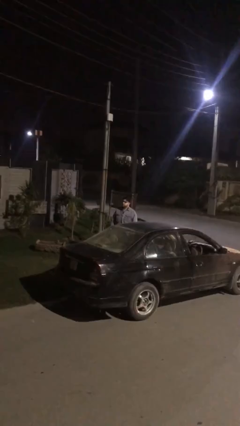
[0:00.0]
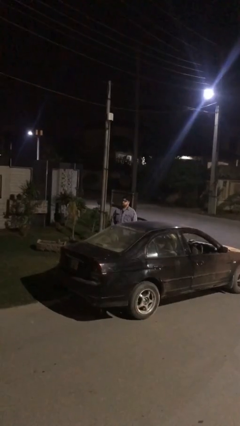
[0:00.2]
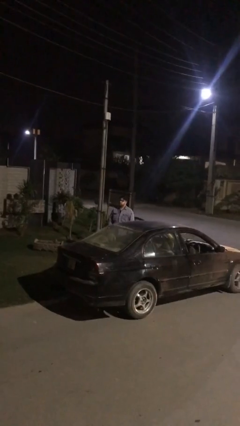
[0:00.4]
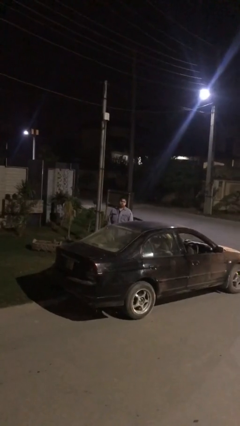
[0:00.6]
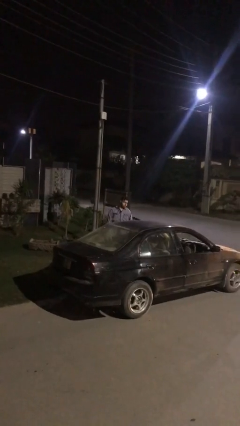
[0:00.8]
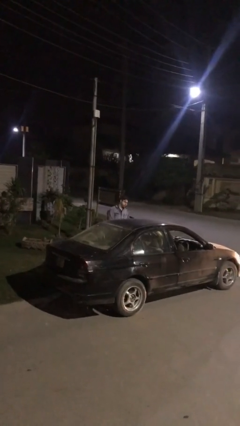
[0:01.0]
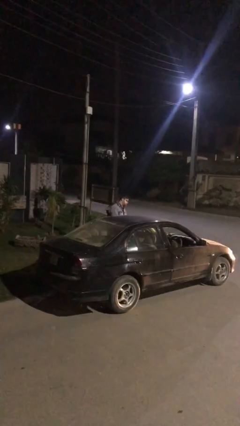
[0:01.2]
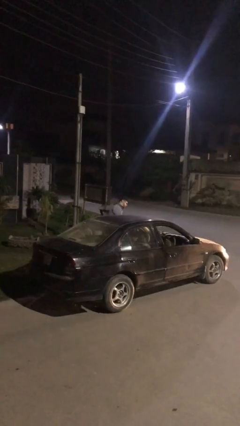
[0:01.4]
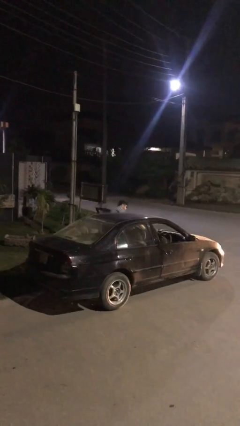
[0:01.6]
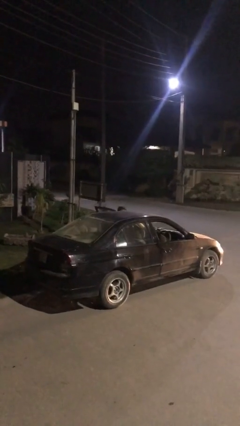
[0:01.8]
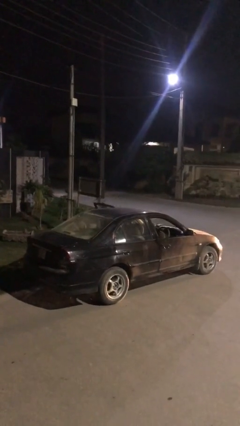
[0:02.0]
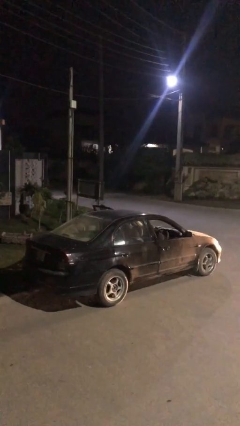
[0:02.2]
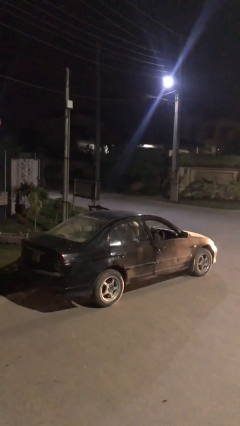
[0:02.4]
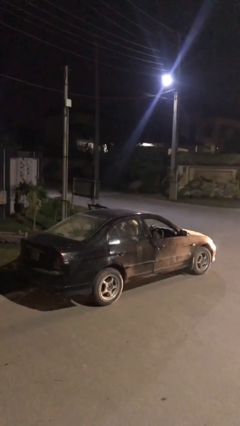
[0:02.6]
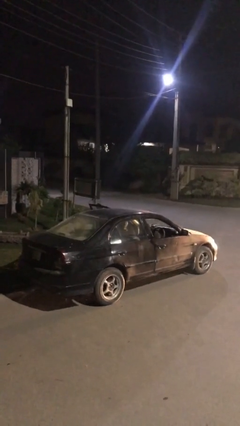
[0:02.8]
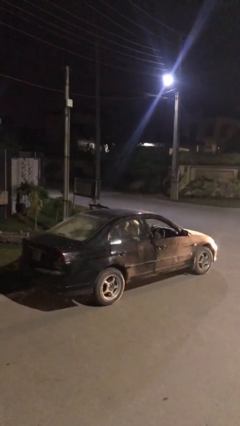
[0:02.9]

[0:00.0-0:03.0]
person enters car

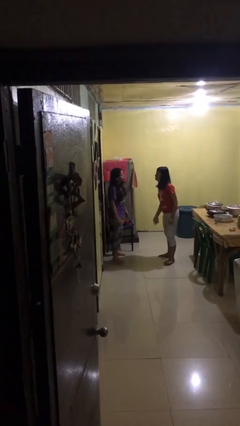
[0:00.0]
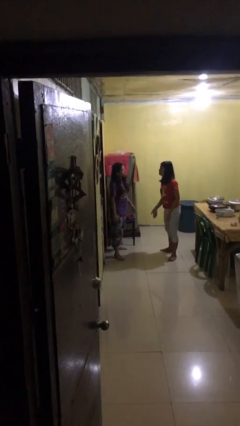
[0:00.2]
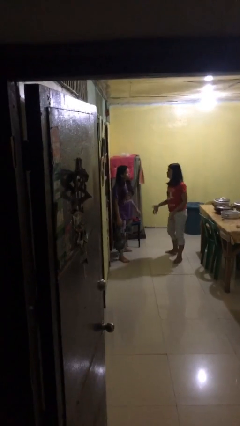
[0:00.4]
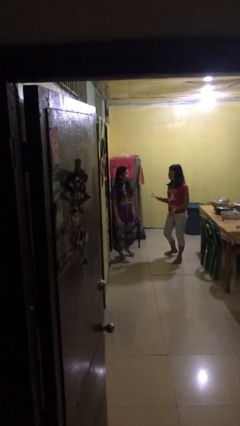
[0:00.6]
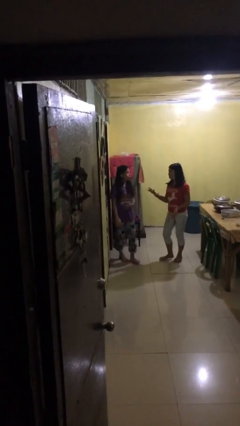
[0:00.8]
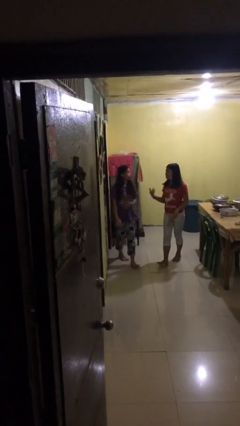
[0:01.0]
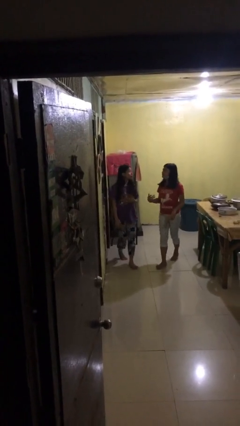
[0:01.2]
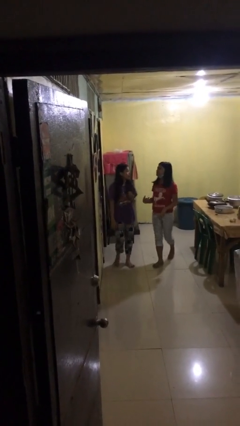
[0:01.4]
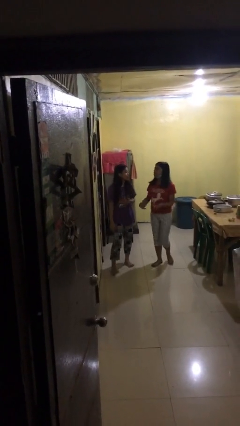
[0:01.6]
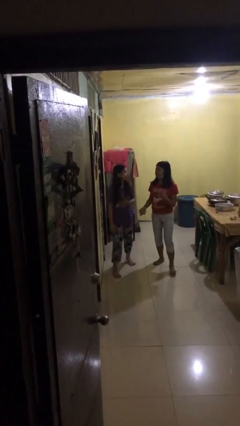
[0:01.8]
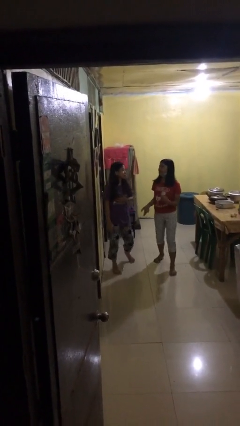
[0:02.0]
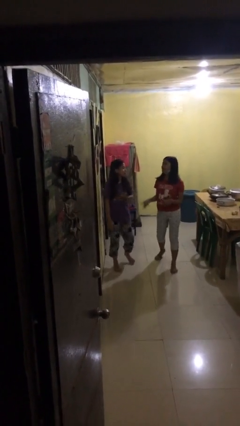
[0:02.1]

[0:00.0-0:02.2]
person talks to person

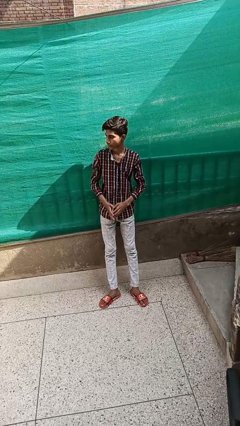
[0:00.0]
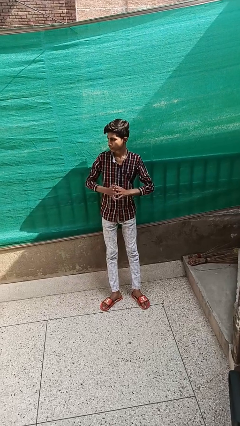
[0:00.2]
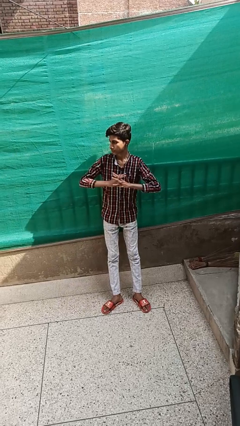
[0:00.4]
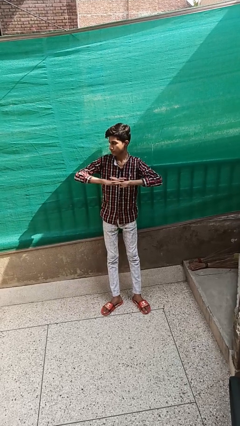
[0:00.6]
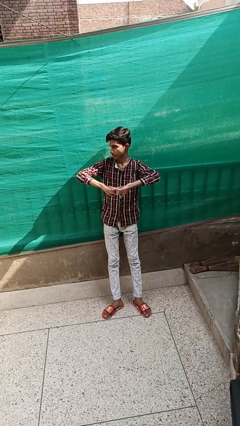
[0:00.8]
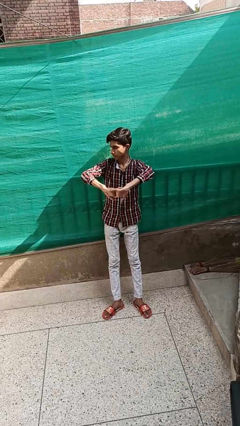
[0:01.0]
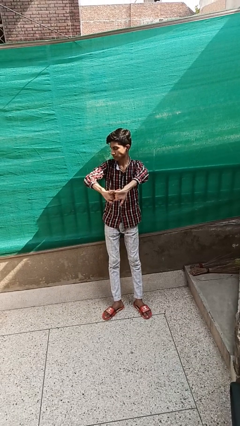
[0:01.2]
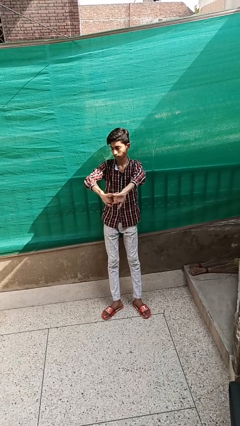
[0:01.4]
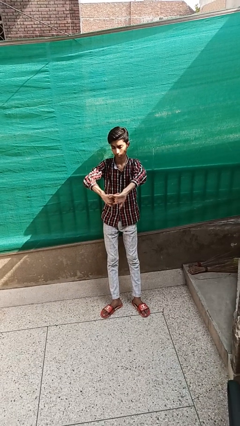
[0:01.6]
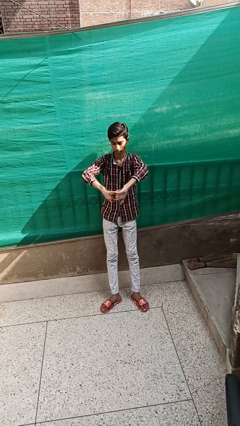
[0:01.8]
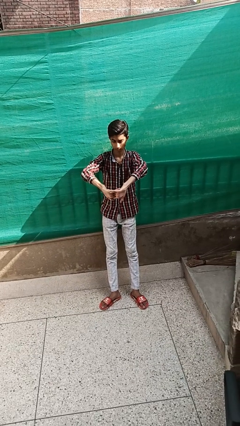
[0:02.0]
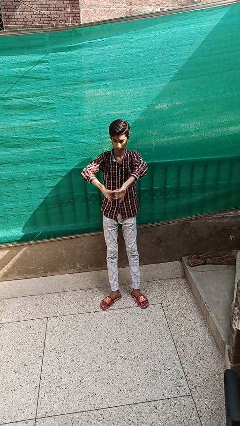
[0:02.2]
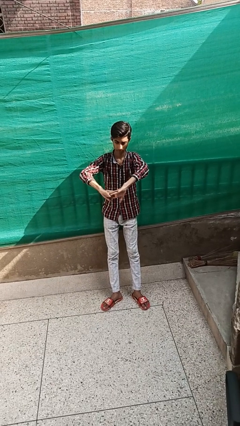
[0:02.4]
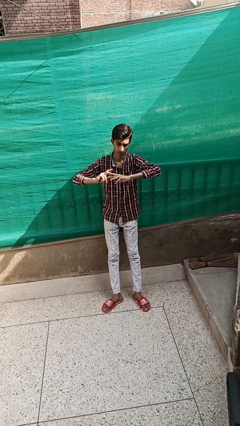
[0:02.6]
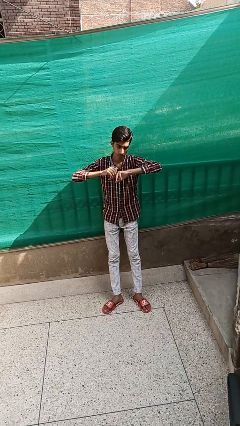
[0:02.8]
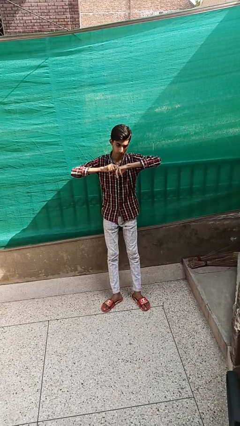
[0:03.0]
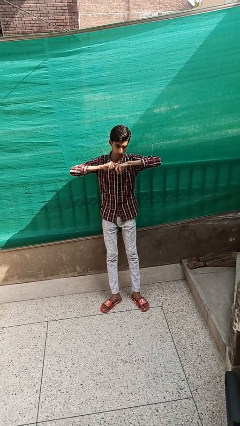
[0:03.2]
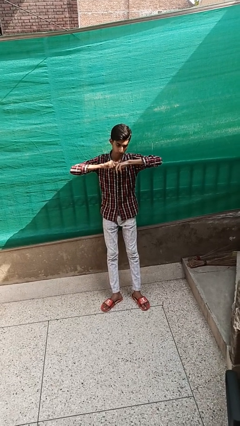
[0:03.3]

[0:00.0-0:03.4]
person cracks knuckles

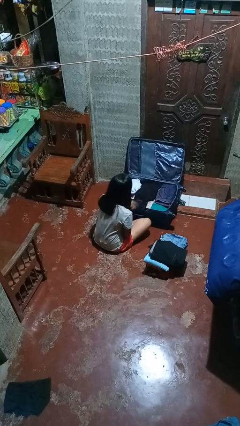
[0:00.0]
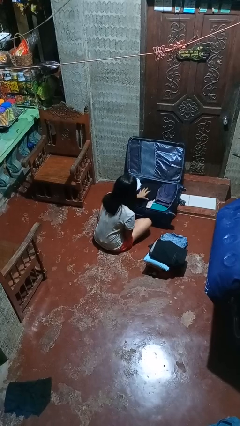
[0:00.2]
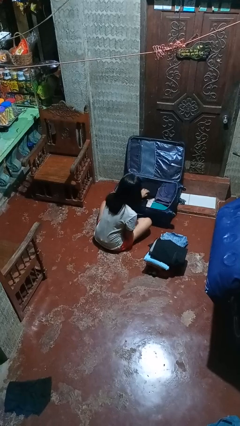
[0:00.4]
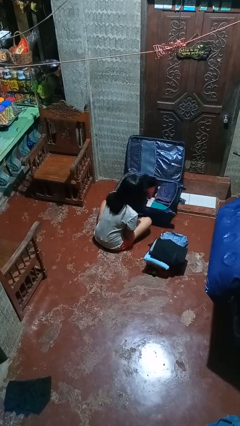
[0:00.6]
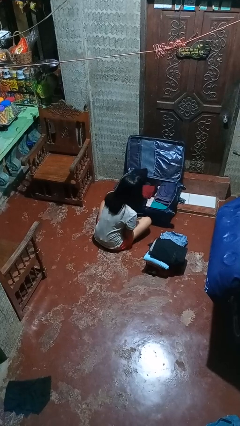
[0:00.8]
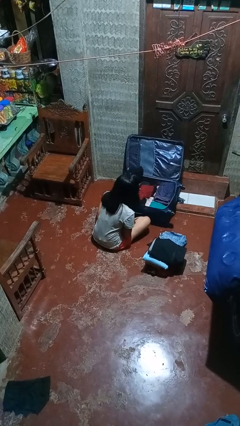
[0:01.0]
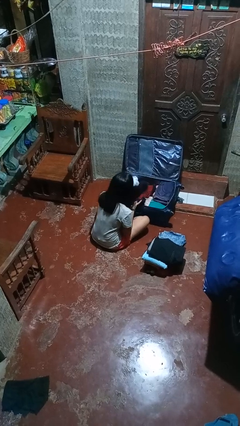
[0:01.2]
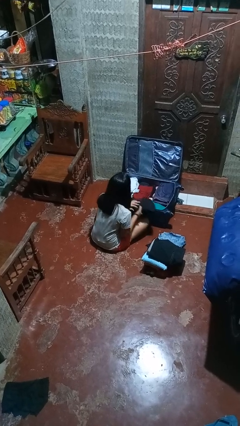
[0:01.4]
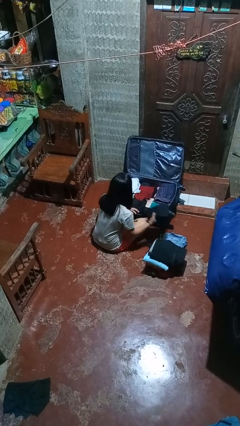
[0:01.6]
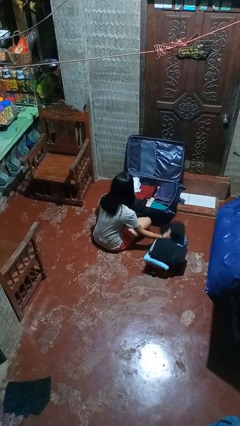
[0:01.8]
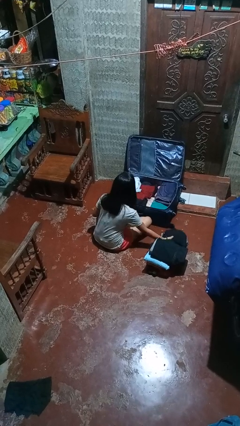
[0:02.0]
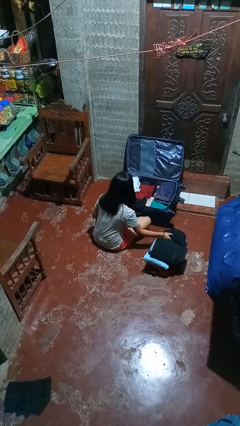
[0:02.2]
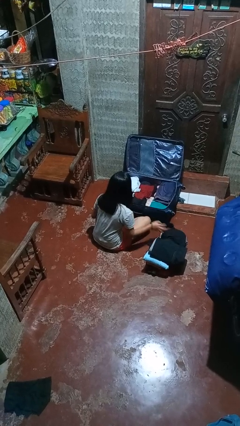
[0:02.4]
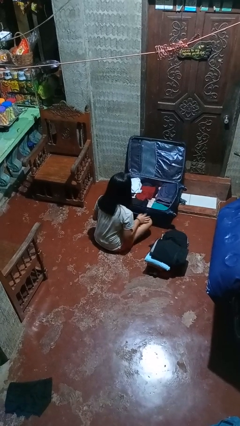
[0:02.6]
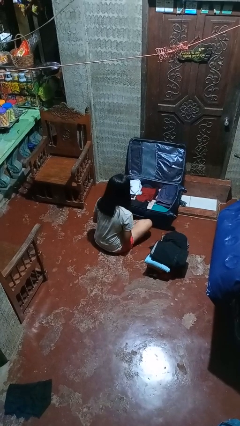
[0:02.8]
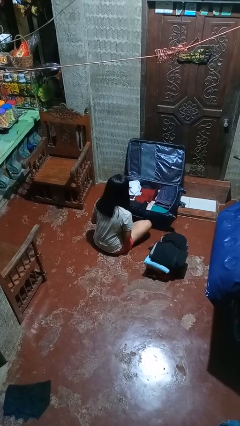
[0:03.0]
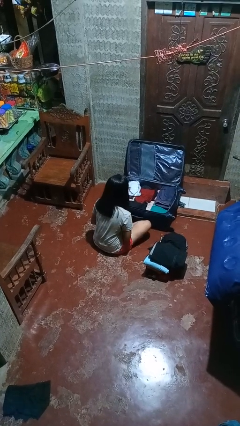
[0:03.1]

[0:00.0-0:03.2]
person unloads clothes from suitcase

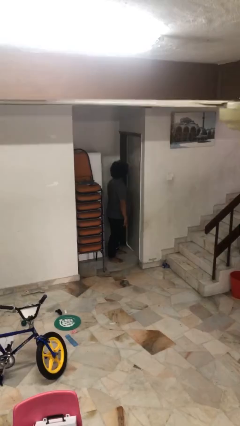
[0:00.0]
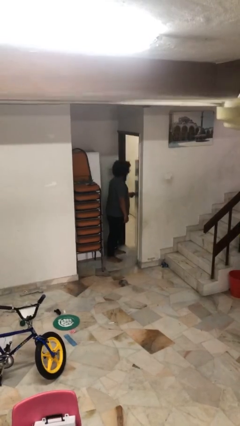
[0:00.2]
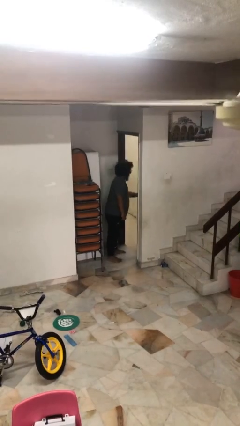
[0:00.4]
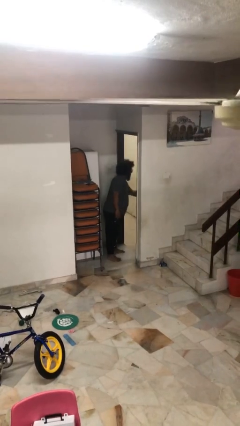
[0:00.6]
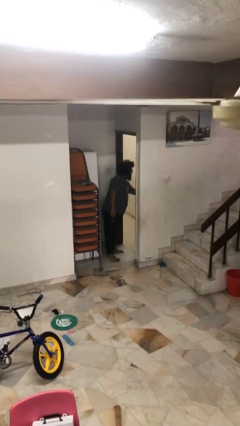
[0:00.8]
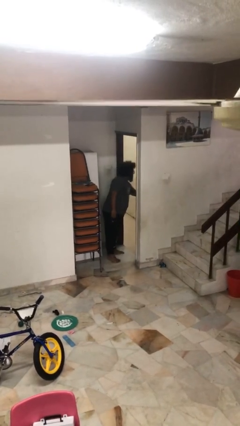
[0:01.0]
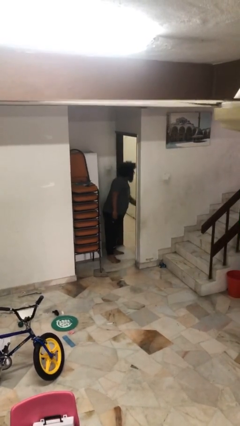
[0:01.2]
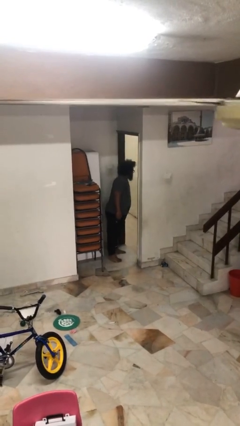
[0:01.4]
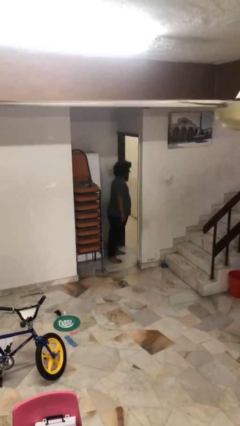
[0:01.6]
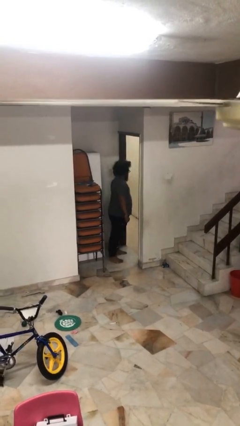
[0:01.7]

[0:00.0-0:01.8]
person opens facility door

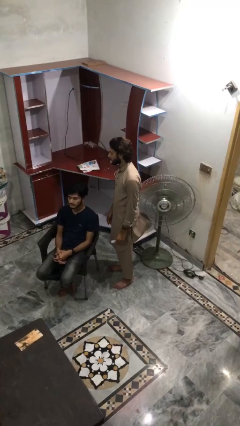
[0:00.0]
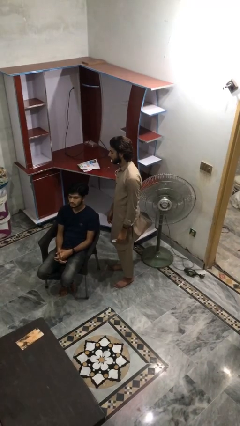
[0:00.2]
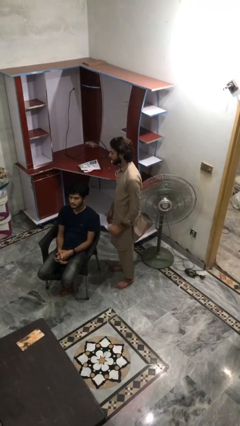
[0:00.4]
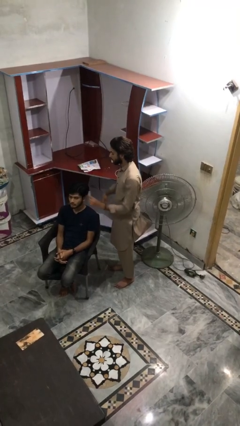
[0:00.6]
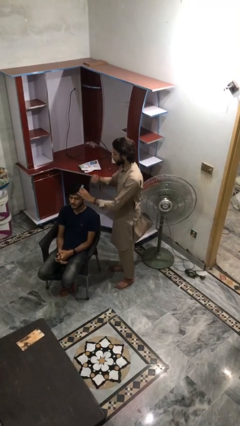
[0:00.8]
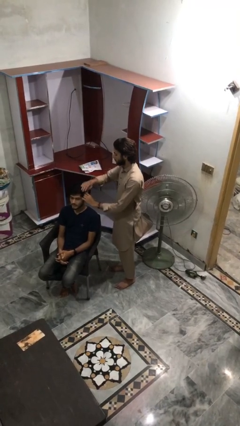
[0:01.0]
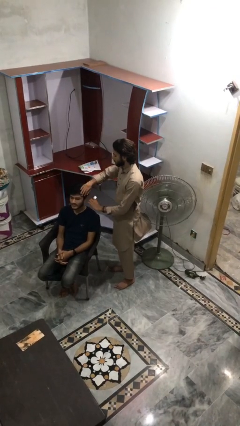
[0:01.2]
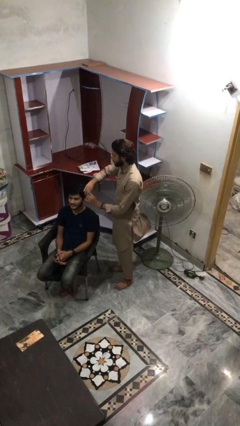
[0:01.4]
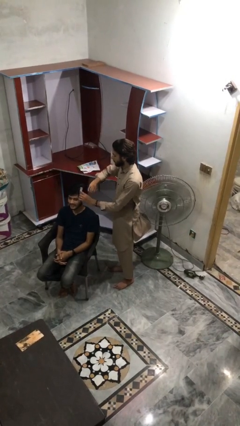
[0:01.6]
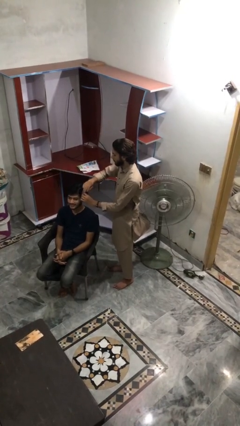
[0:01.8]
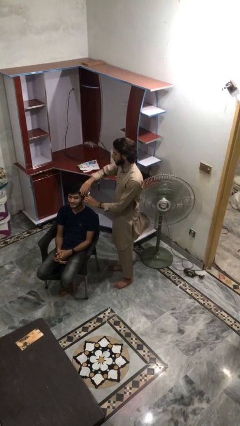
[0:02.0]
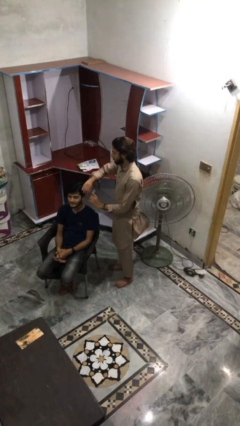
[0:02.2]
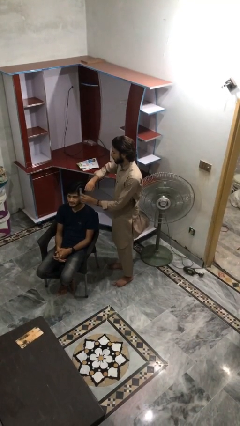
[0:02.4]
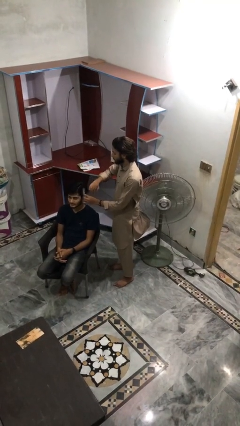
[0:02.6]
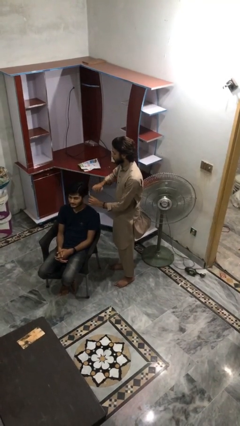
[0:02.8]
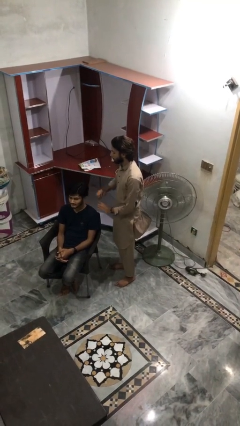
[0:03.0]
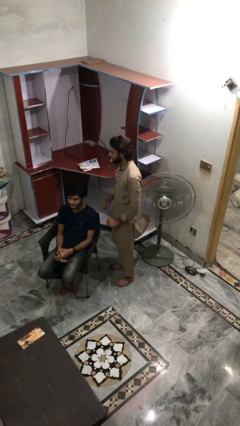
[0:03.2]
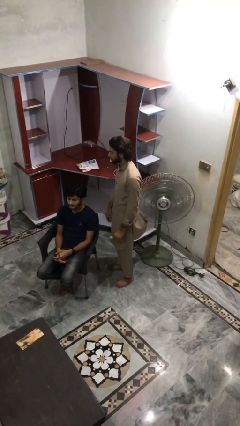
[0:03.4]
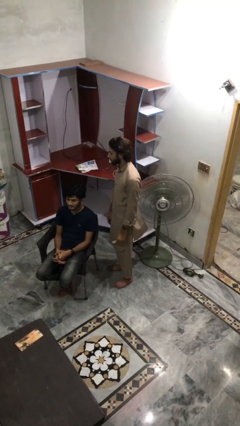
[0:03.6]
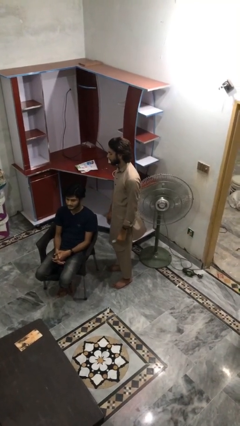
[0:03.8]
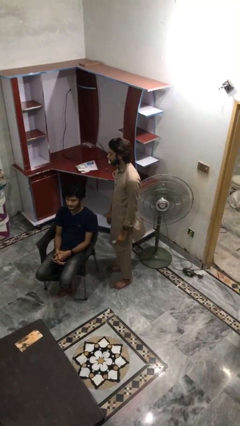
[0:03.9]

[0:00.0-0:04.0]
person brushes hair of person
